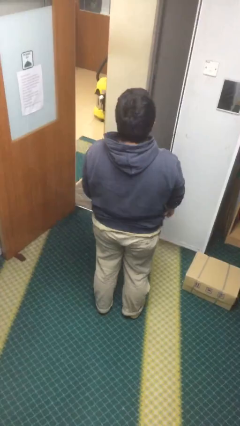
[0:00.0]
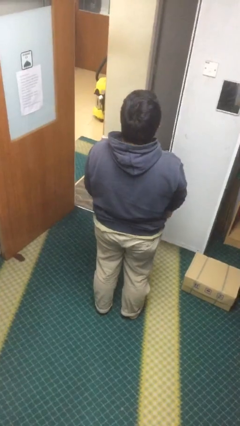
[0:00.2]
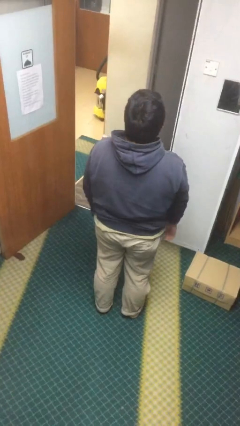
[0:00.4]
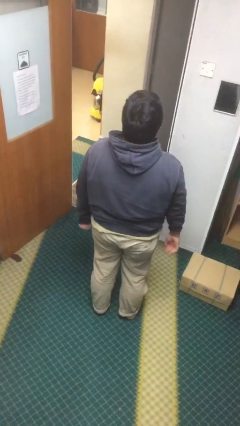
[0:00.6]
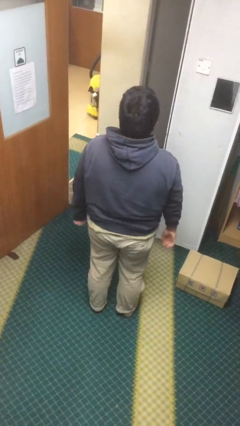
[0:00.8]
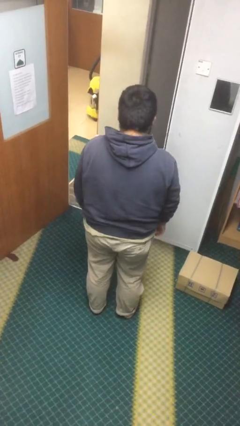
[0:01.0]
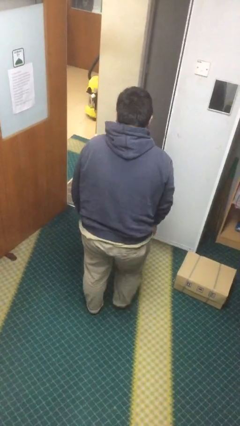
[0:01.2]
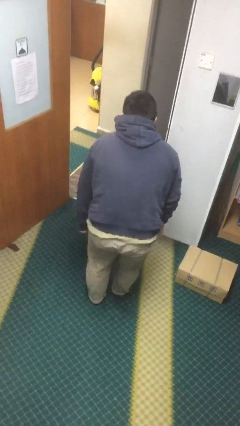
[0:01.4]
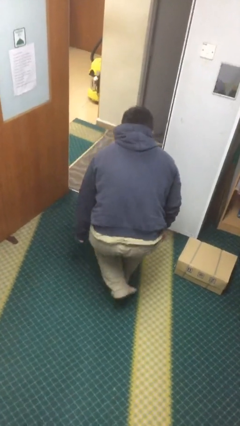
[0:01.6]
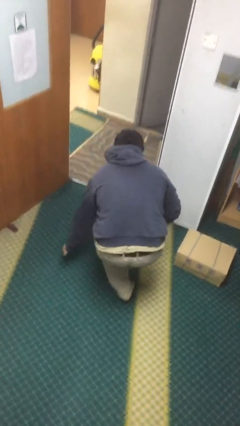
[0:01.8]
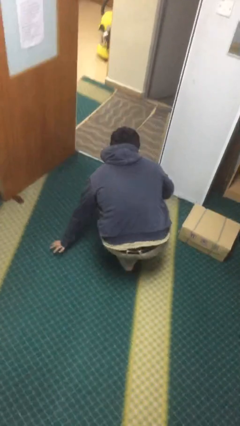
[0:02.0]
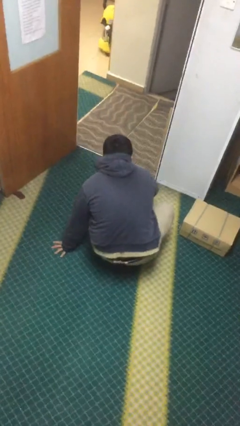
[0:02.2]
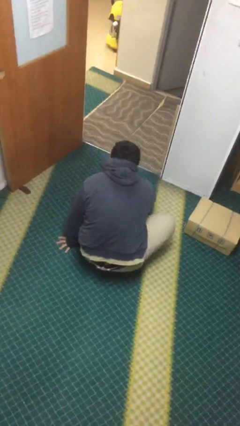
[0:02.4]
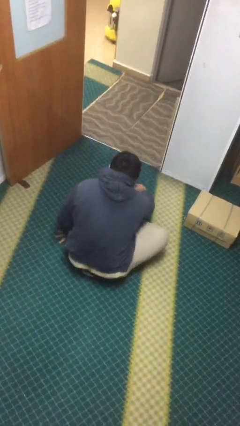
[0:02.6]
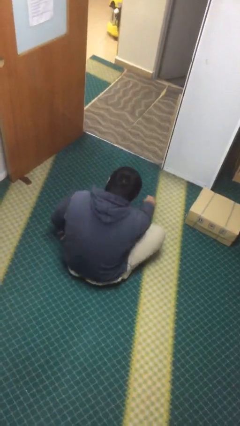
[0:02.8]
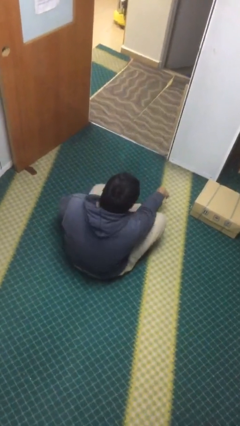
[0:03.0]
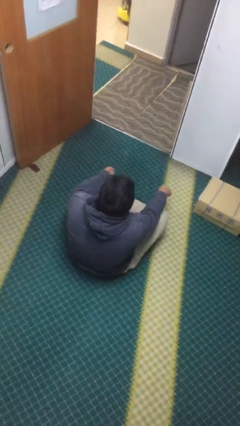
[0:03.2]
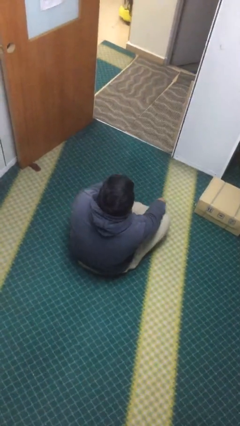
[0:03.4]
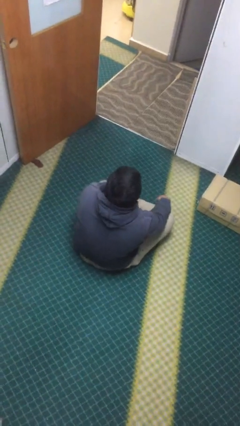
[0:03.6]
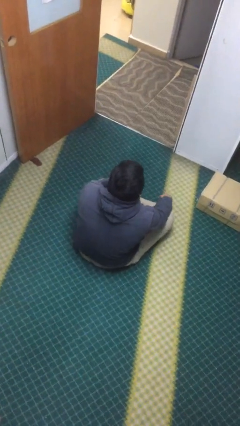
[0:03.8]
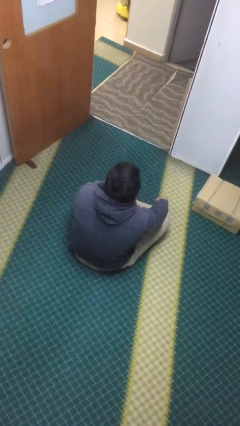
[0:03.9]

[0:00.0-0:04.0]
person sits crisscross

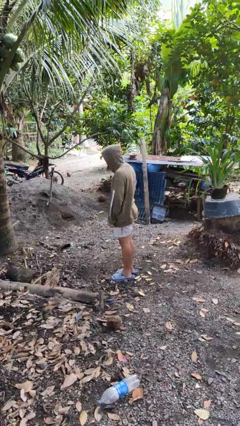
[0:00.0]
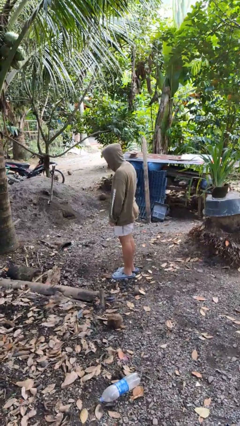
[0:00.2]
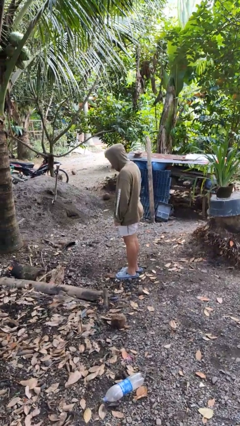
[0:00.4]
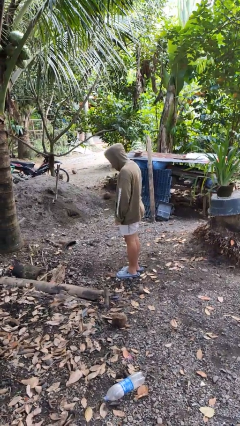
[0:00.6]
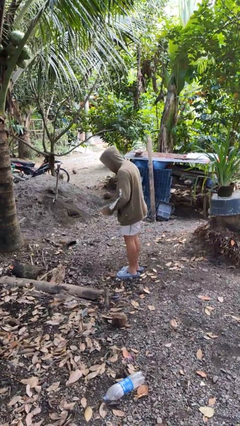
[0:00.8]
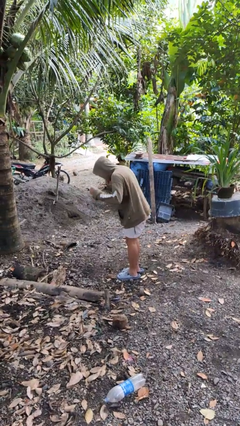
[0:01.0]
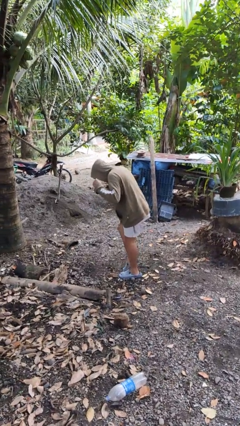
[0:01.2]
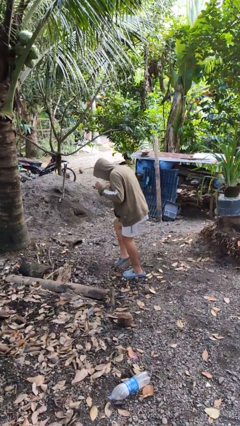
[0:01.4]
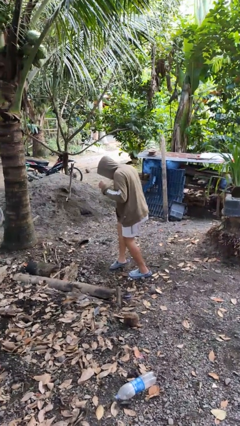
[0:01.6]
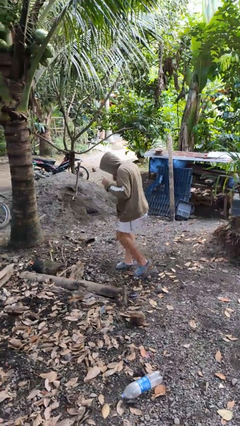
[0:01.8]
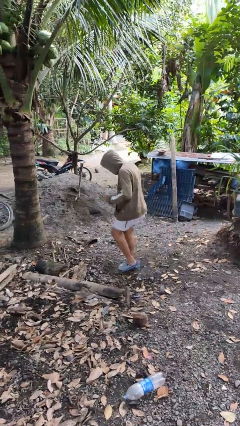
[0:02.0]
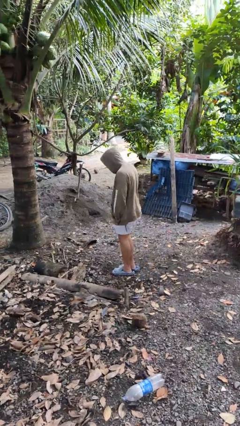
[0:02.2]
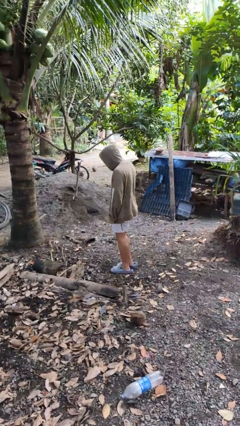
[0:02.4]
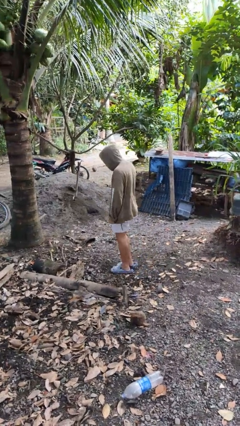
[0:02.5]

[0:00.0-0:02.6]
person walks tiptoe

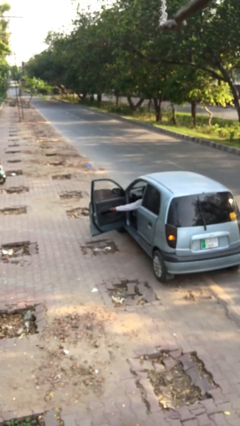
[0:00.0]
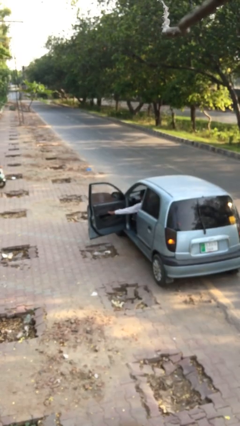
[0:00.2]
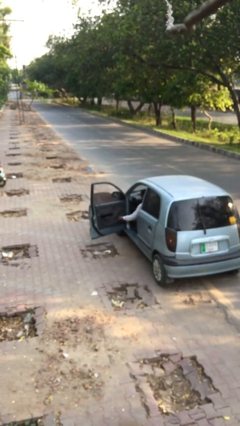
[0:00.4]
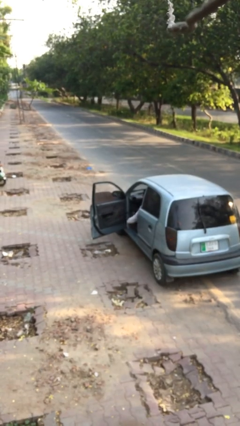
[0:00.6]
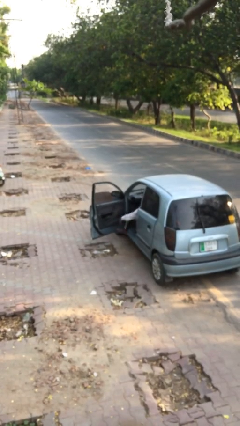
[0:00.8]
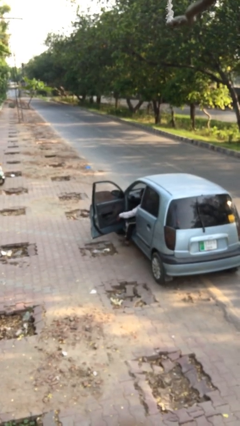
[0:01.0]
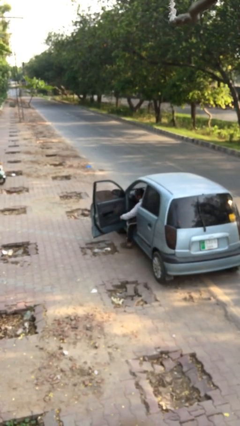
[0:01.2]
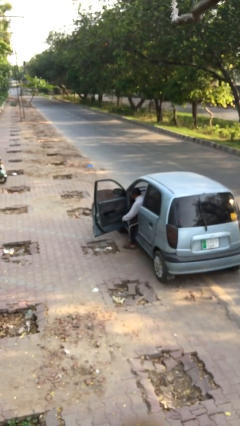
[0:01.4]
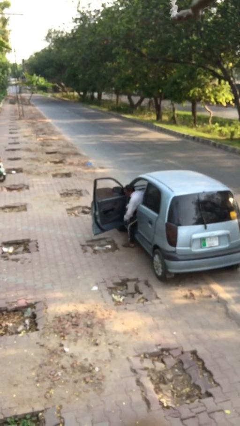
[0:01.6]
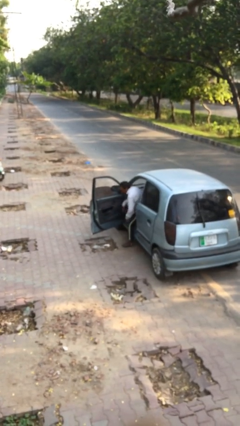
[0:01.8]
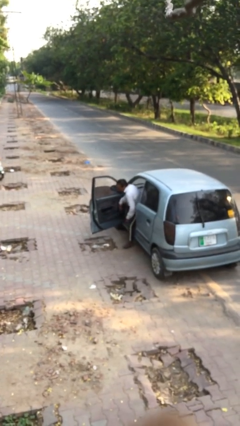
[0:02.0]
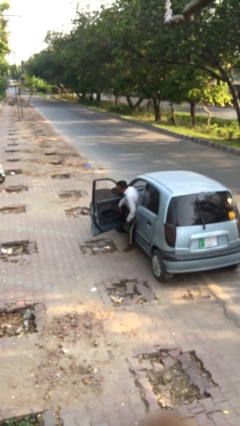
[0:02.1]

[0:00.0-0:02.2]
person exits car

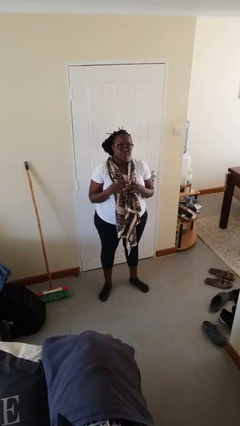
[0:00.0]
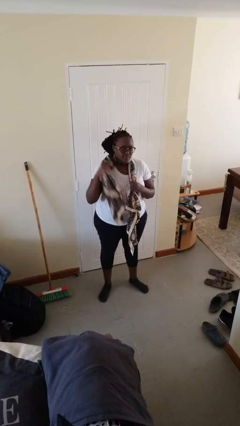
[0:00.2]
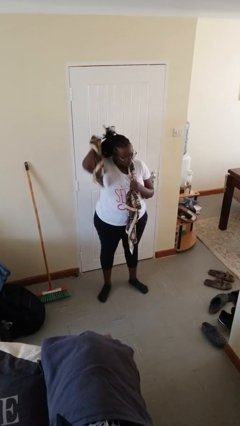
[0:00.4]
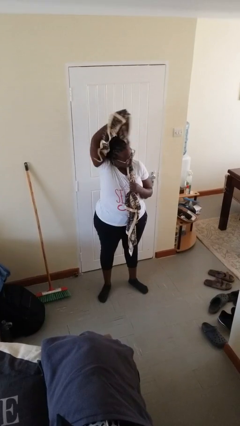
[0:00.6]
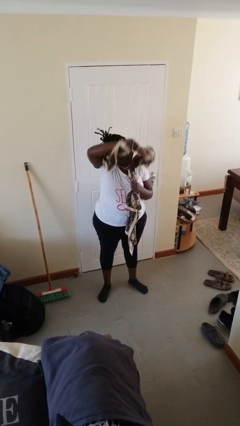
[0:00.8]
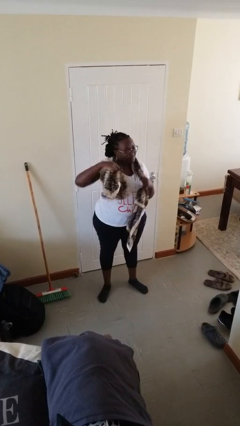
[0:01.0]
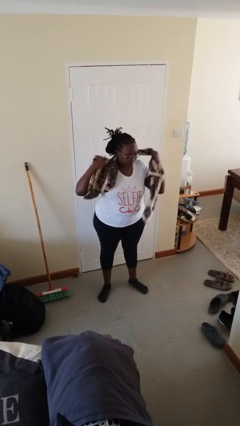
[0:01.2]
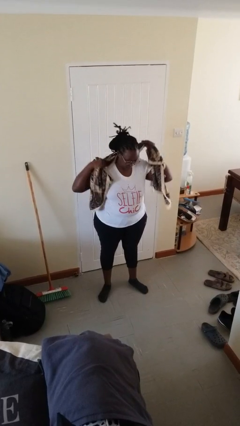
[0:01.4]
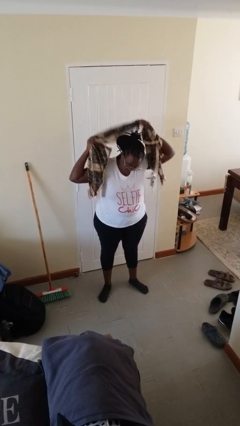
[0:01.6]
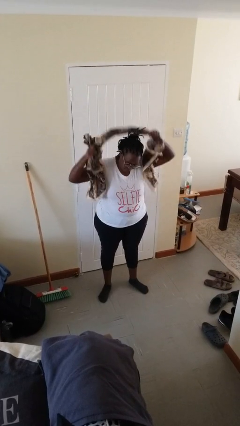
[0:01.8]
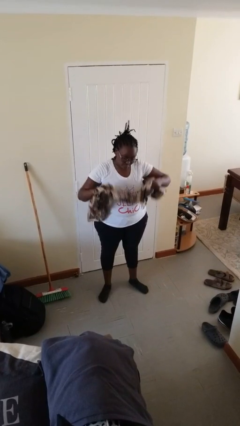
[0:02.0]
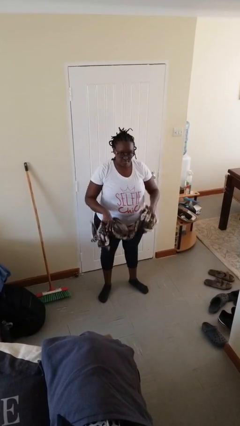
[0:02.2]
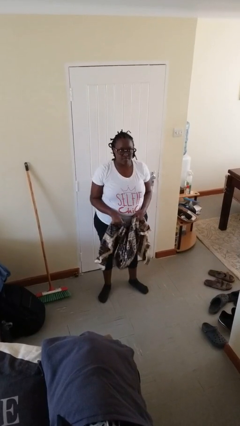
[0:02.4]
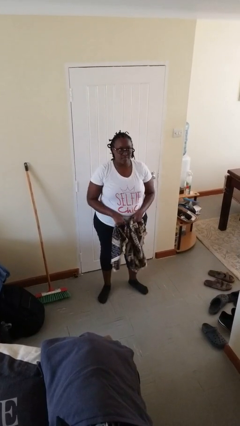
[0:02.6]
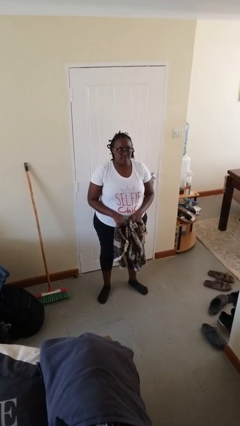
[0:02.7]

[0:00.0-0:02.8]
person takes off scarf

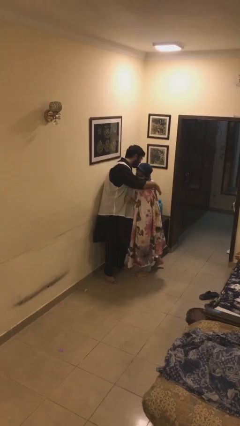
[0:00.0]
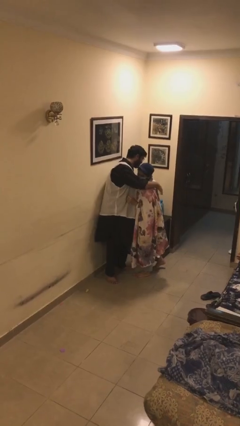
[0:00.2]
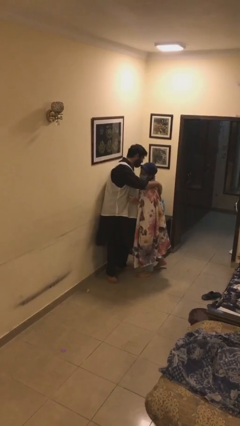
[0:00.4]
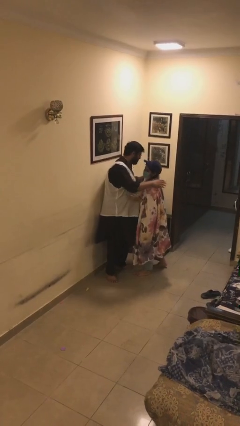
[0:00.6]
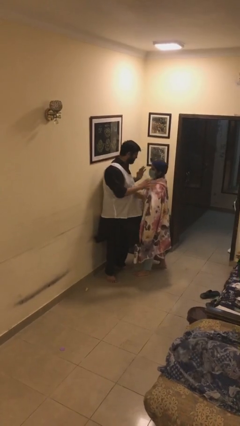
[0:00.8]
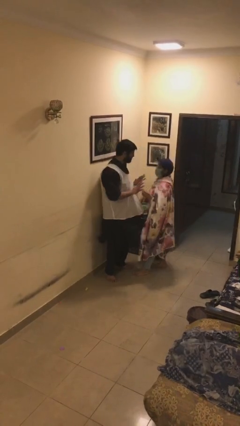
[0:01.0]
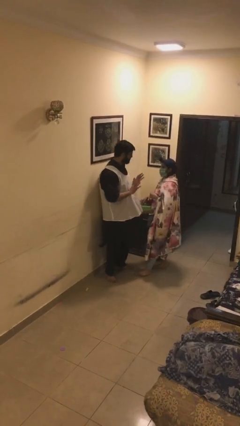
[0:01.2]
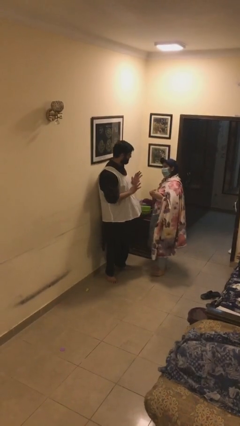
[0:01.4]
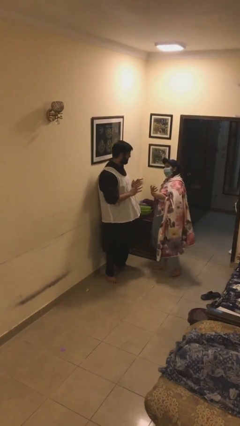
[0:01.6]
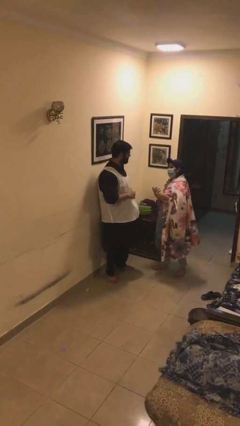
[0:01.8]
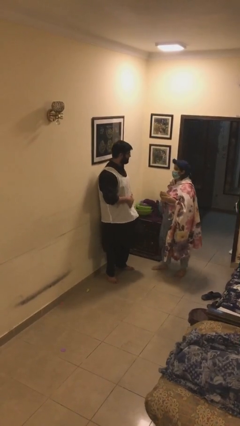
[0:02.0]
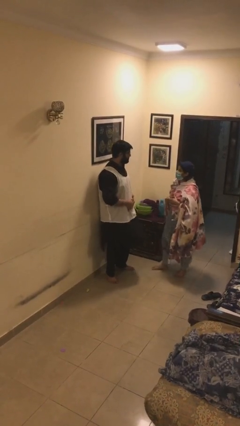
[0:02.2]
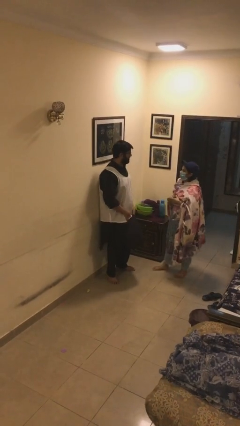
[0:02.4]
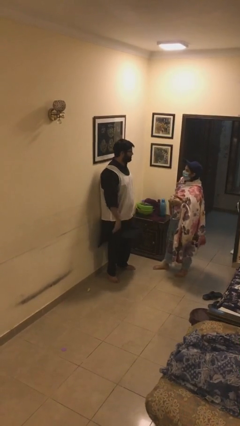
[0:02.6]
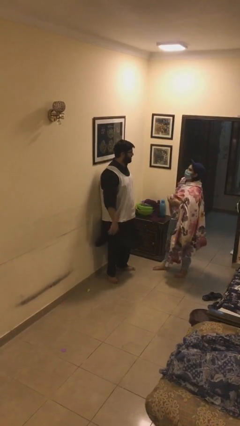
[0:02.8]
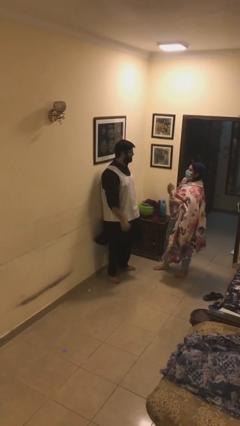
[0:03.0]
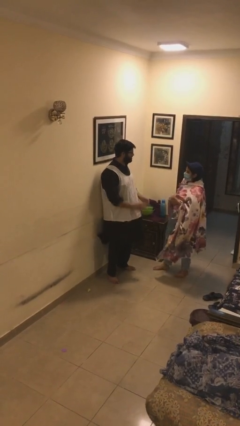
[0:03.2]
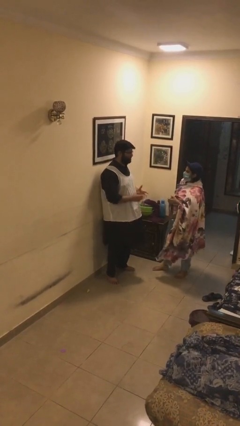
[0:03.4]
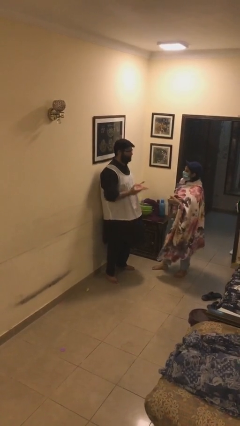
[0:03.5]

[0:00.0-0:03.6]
person talks to person

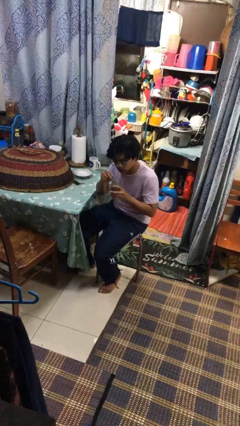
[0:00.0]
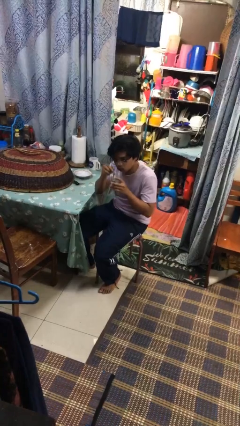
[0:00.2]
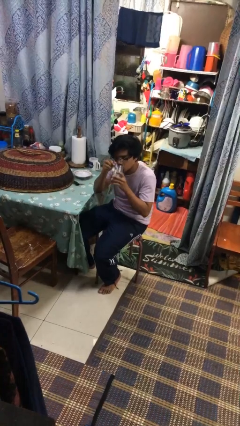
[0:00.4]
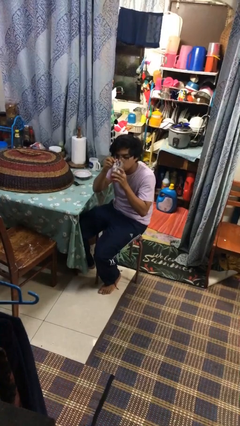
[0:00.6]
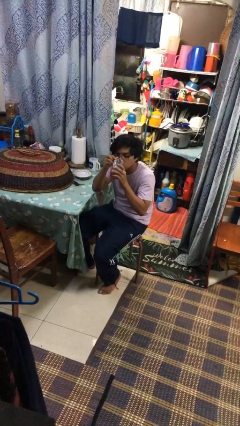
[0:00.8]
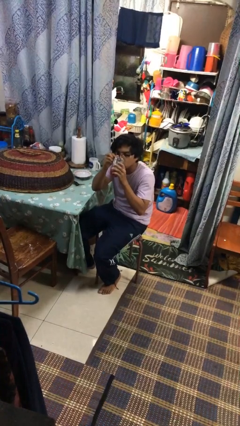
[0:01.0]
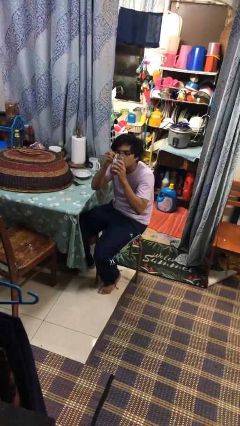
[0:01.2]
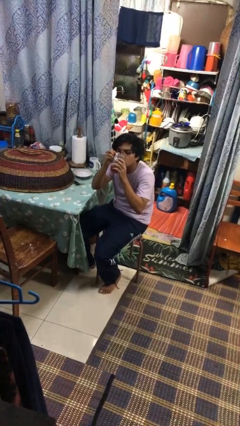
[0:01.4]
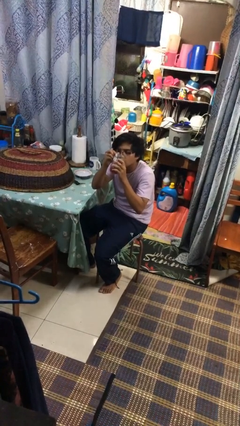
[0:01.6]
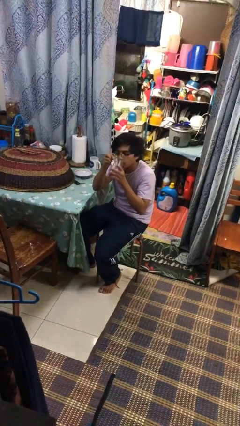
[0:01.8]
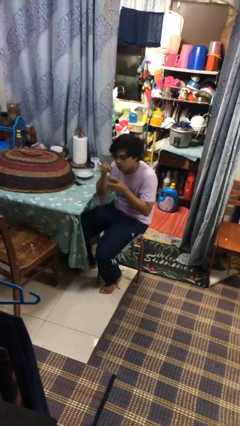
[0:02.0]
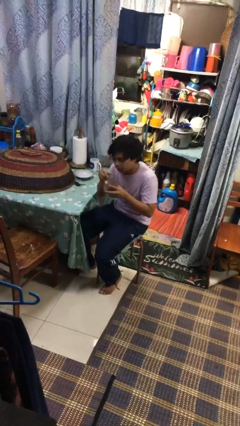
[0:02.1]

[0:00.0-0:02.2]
person drinks from mug

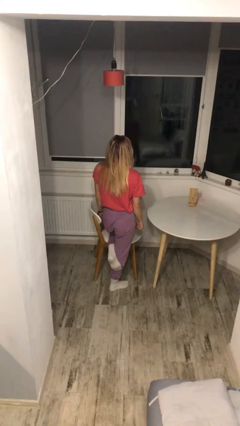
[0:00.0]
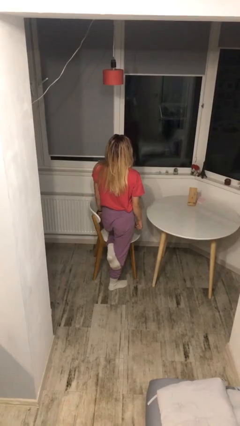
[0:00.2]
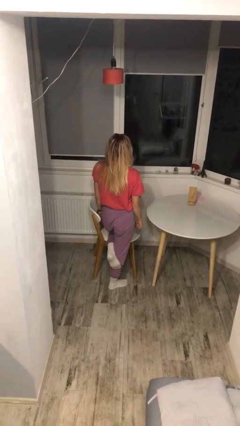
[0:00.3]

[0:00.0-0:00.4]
person gestures heart
